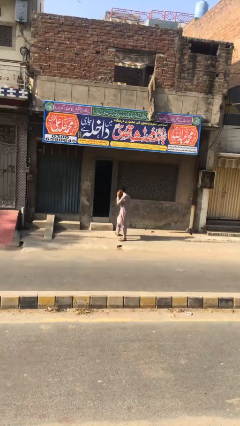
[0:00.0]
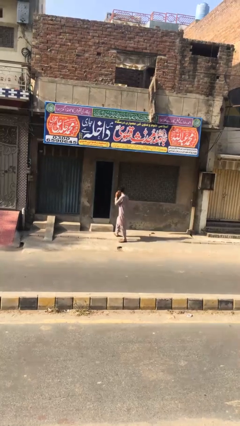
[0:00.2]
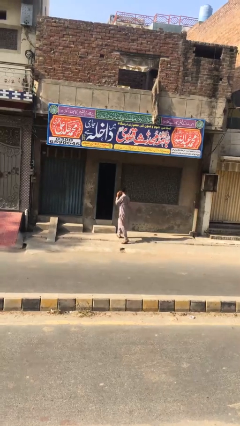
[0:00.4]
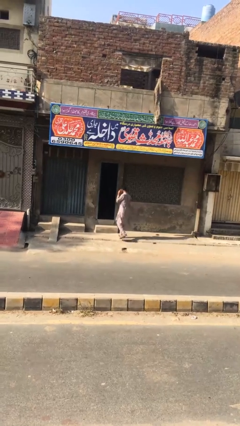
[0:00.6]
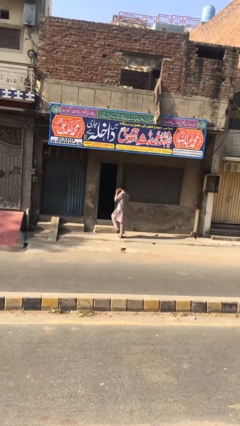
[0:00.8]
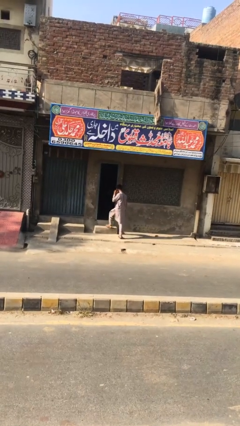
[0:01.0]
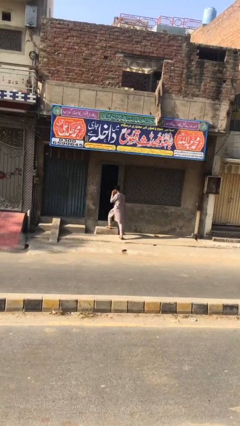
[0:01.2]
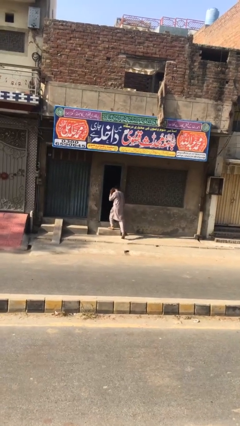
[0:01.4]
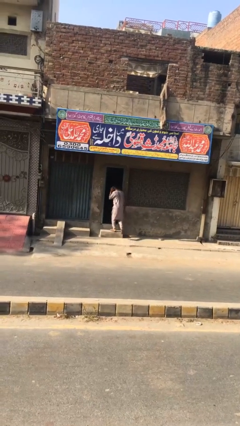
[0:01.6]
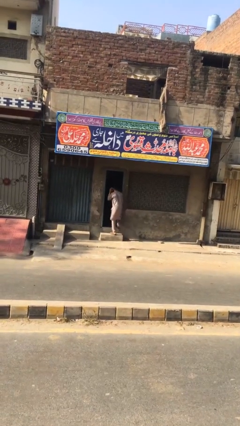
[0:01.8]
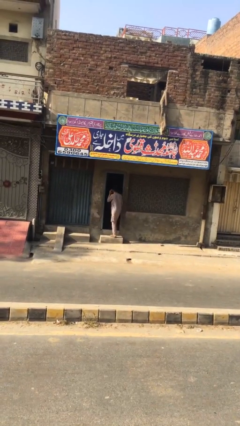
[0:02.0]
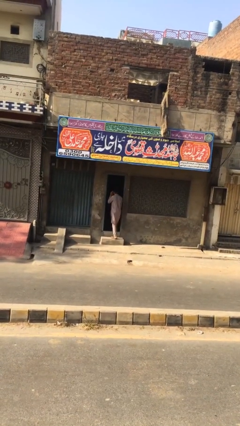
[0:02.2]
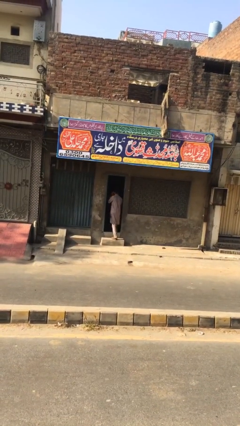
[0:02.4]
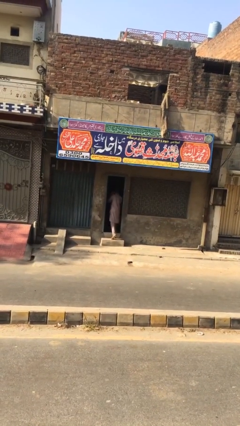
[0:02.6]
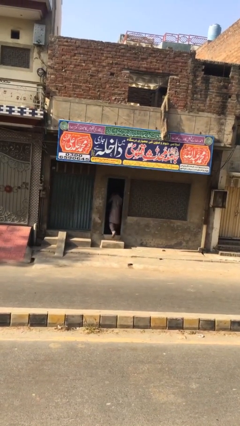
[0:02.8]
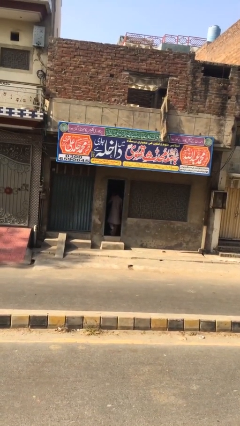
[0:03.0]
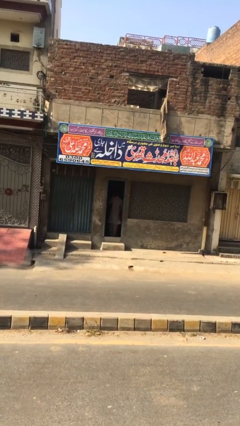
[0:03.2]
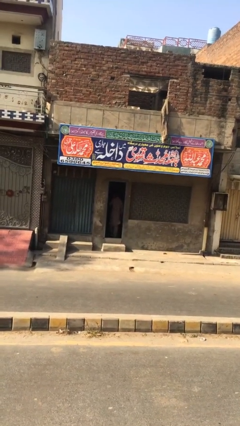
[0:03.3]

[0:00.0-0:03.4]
person exits scene through structure

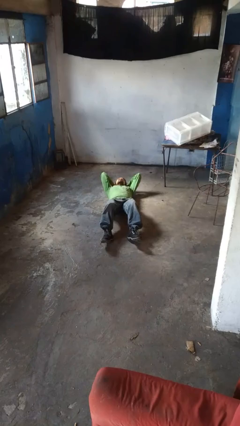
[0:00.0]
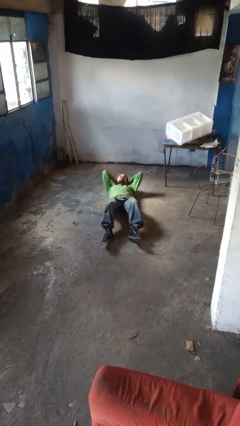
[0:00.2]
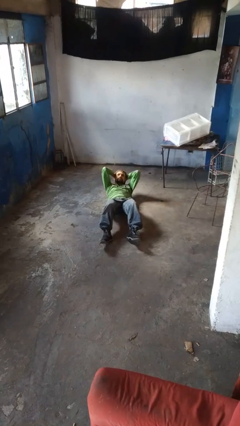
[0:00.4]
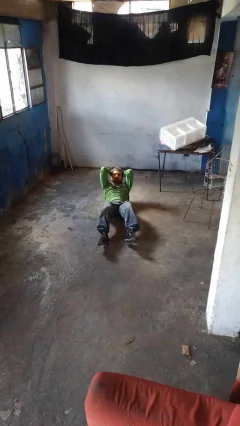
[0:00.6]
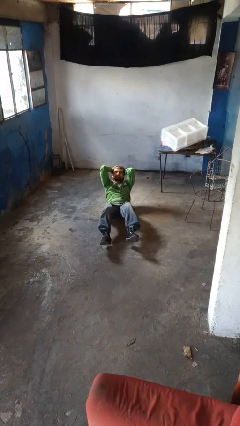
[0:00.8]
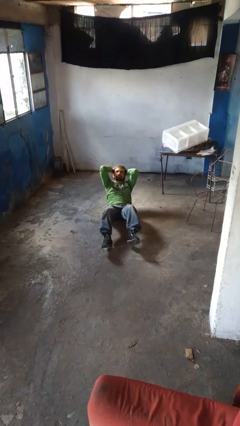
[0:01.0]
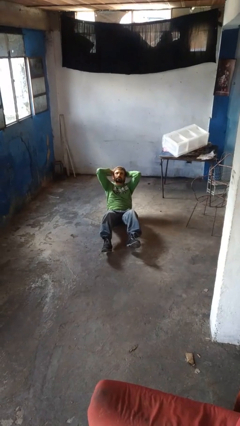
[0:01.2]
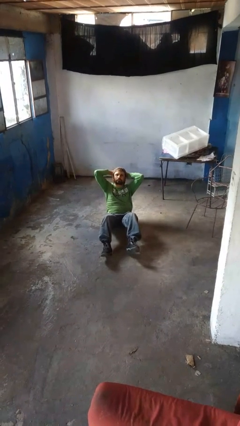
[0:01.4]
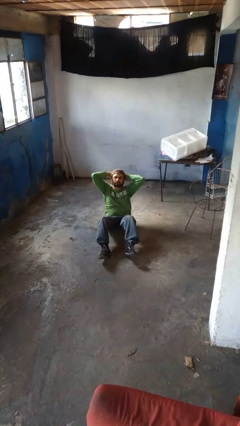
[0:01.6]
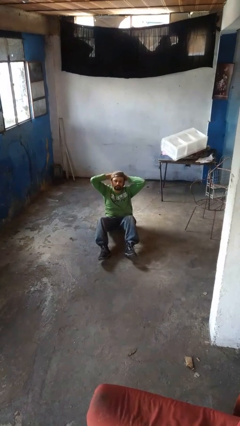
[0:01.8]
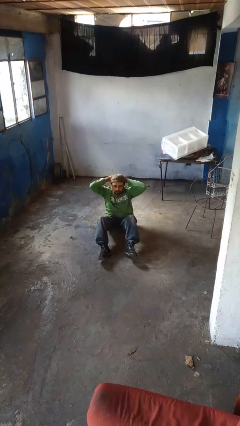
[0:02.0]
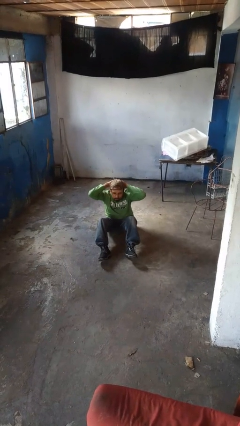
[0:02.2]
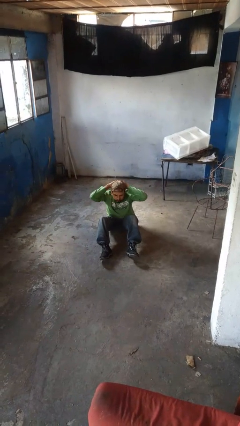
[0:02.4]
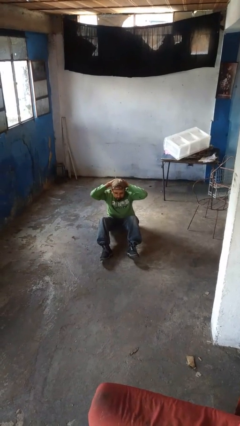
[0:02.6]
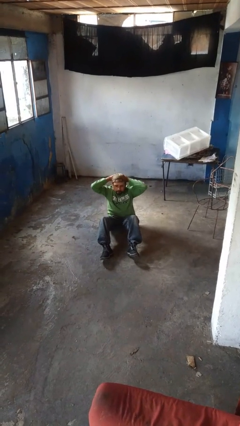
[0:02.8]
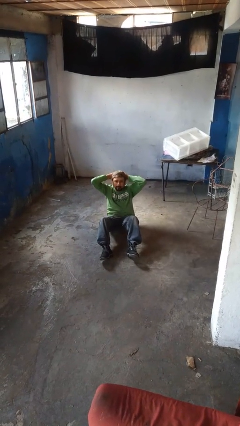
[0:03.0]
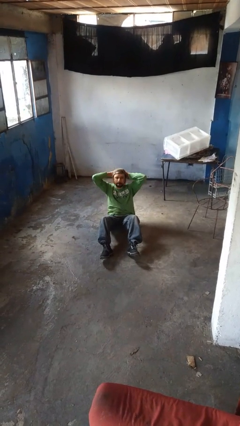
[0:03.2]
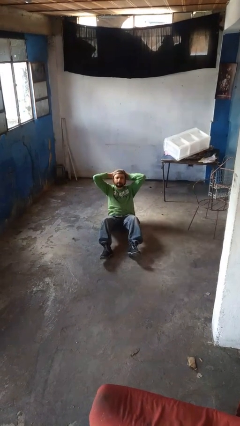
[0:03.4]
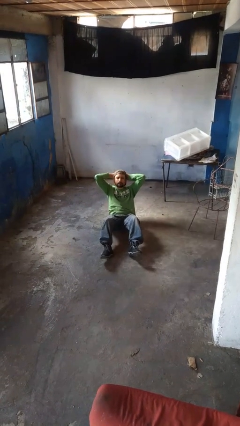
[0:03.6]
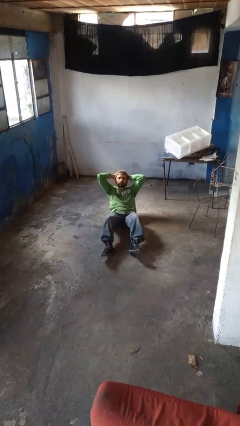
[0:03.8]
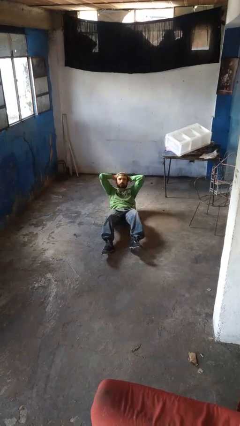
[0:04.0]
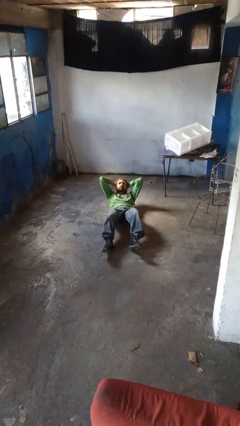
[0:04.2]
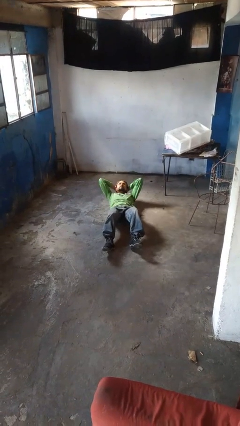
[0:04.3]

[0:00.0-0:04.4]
person exercises with situp

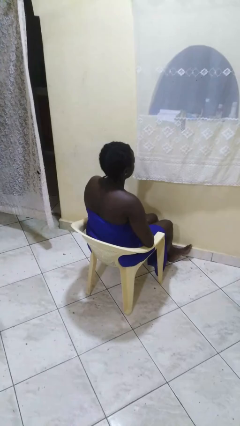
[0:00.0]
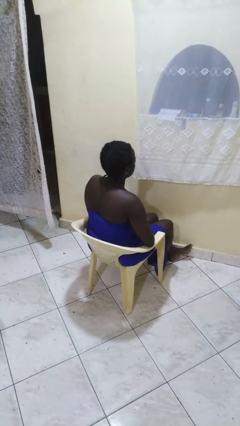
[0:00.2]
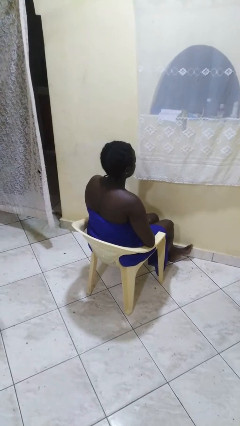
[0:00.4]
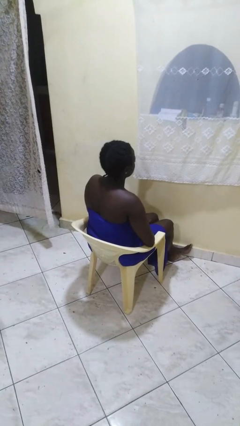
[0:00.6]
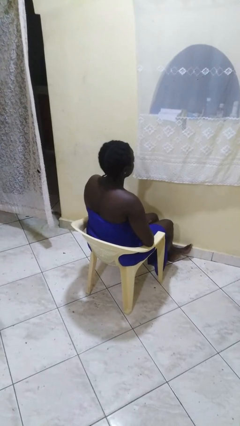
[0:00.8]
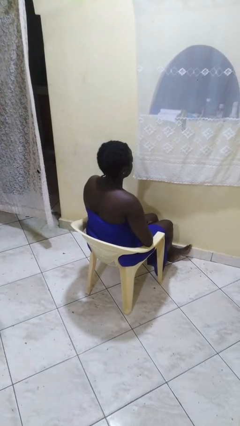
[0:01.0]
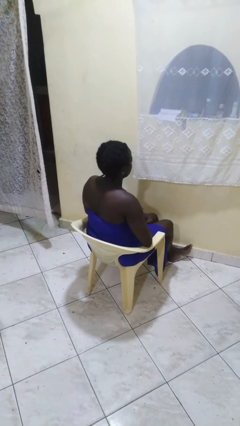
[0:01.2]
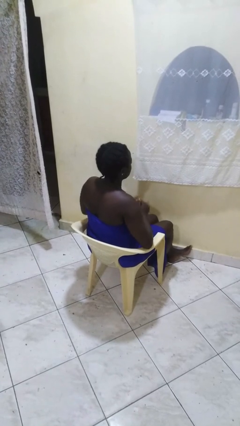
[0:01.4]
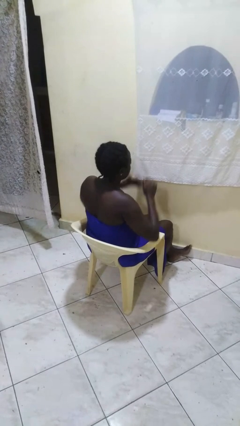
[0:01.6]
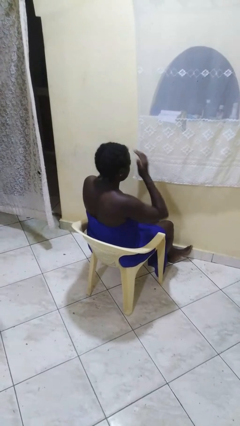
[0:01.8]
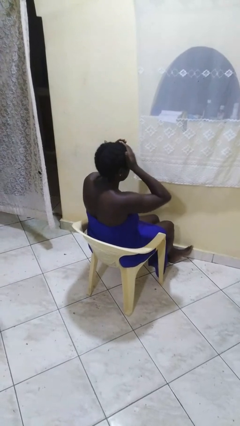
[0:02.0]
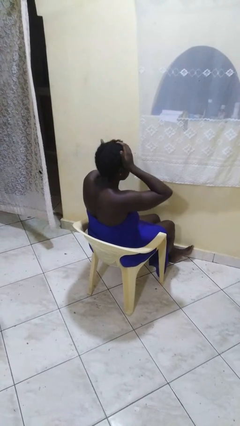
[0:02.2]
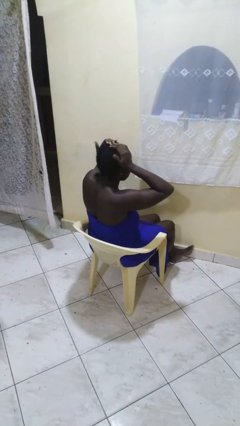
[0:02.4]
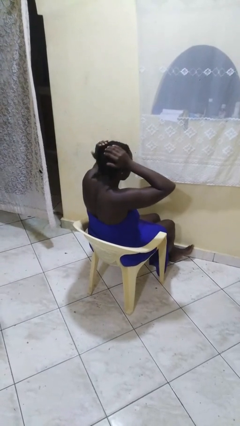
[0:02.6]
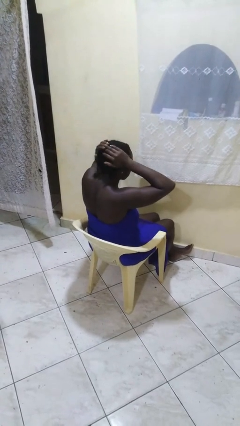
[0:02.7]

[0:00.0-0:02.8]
person strokes hair

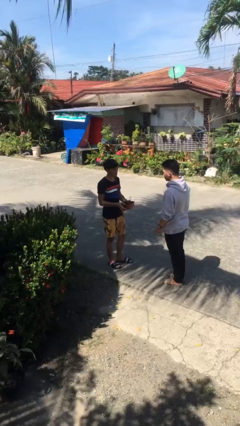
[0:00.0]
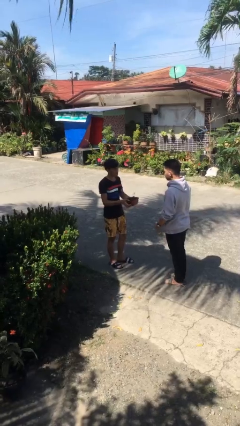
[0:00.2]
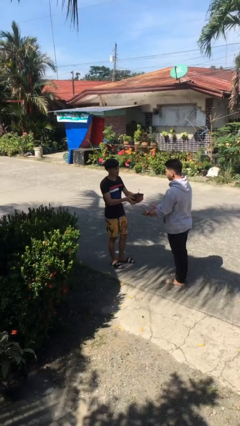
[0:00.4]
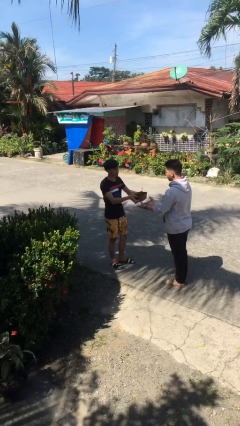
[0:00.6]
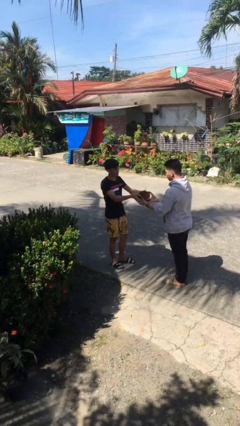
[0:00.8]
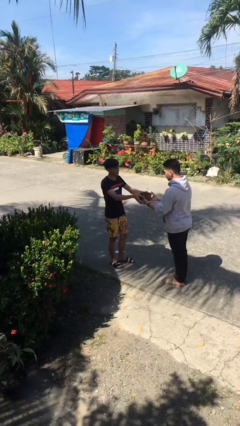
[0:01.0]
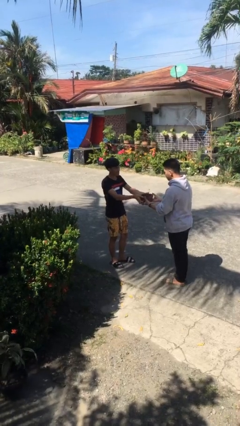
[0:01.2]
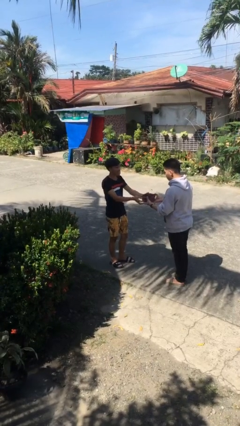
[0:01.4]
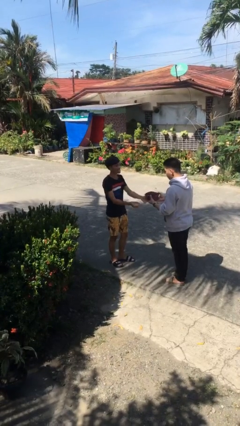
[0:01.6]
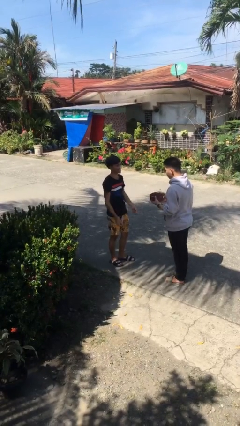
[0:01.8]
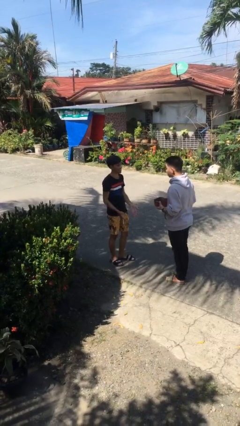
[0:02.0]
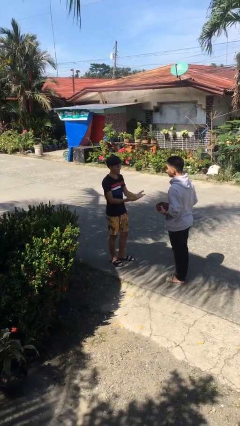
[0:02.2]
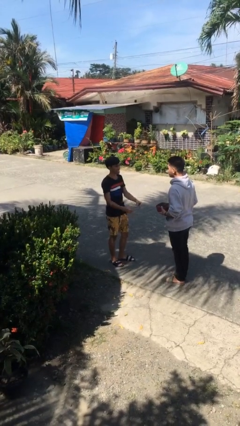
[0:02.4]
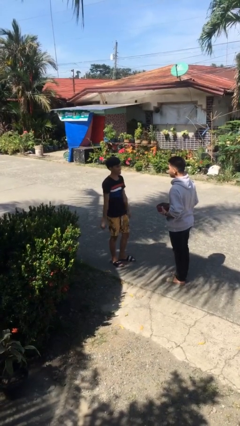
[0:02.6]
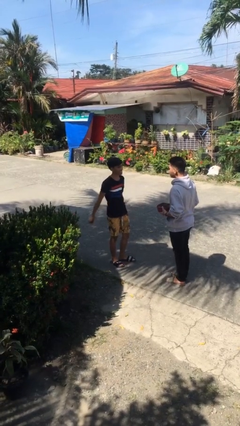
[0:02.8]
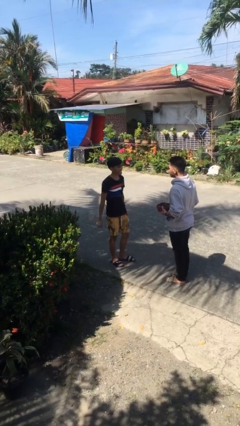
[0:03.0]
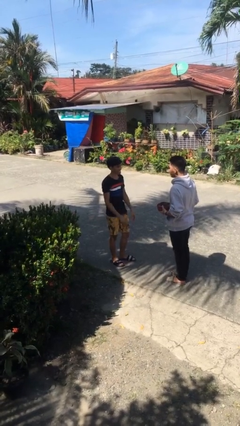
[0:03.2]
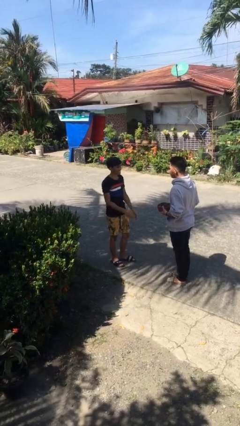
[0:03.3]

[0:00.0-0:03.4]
person transfers object to person

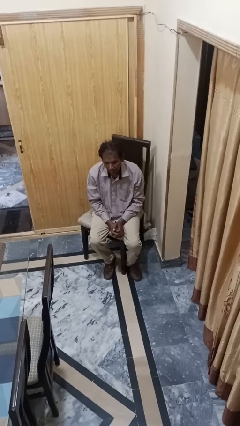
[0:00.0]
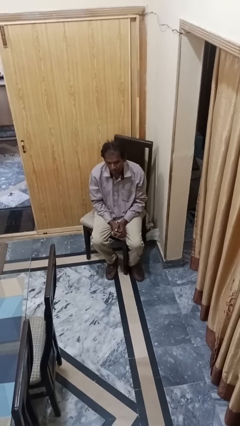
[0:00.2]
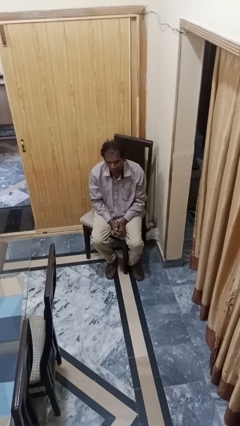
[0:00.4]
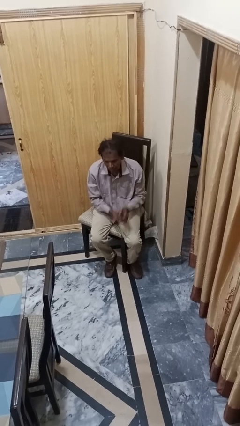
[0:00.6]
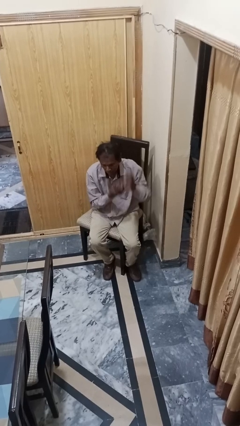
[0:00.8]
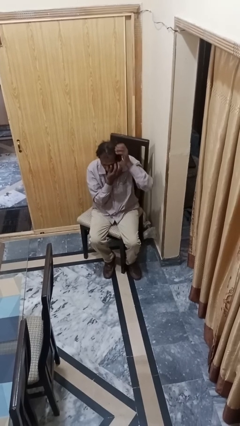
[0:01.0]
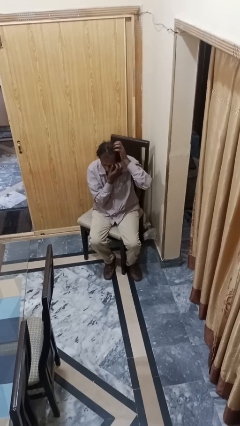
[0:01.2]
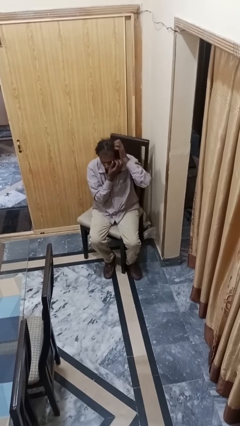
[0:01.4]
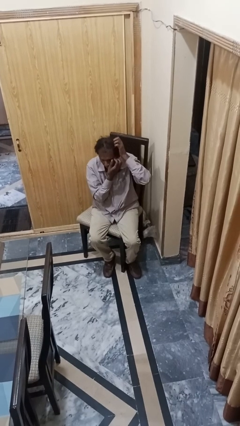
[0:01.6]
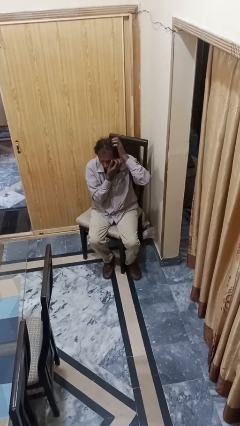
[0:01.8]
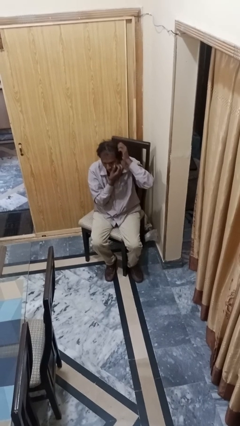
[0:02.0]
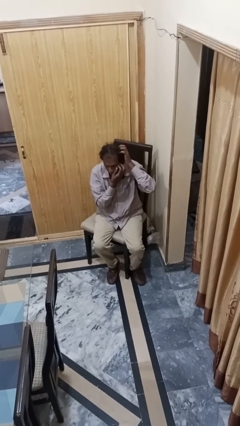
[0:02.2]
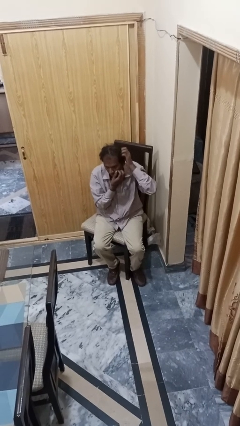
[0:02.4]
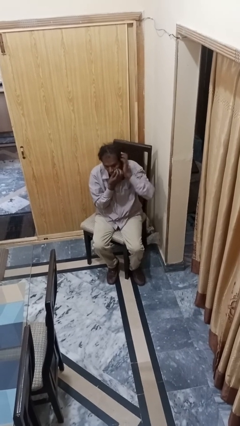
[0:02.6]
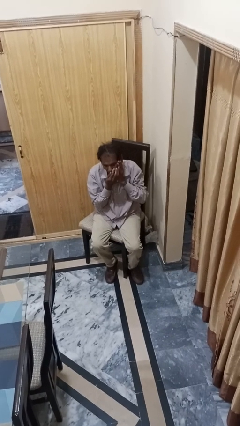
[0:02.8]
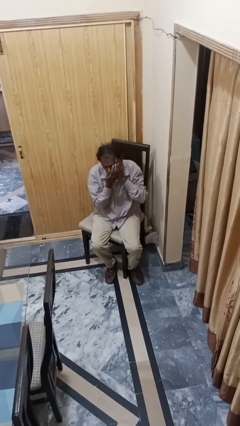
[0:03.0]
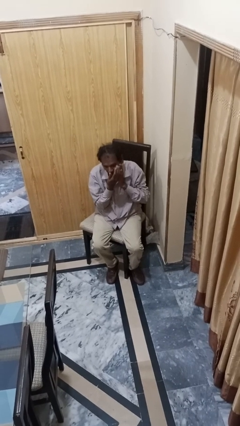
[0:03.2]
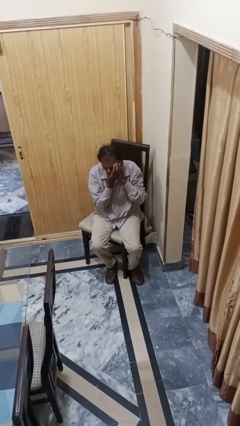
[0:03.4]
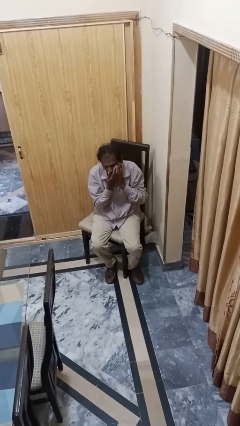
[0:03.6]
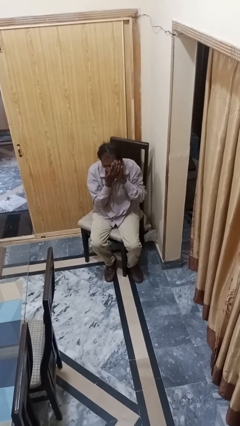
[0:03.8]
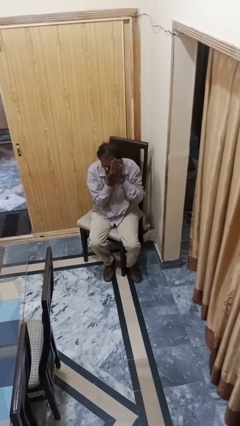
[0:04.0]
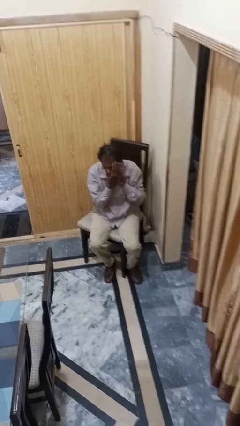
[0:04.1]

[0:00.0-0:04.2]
person scratches face
